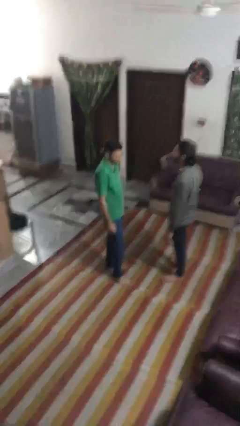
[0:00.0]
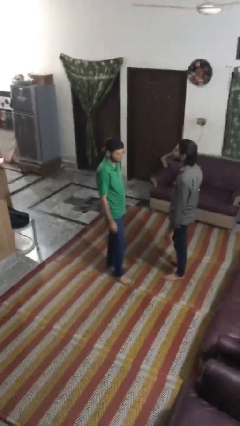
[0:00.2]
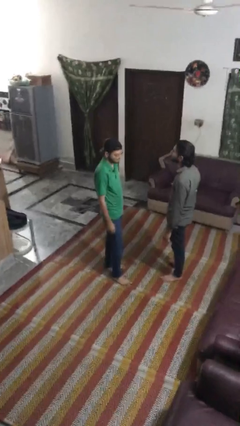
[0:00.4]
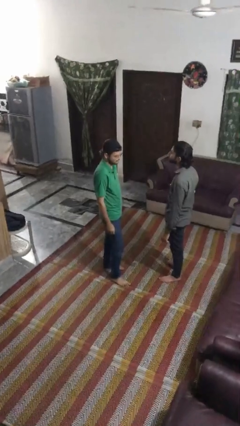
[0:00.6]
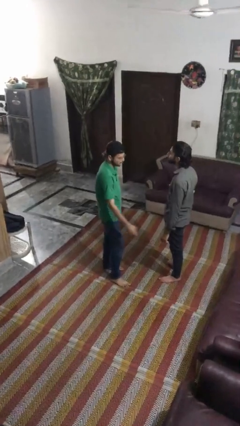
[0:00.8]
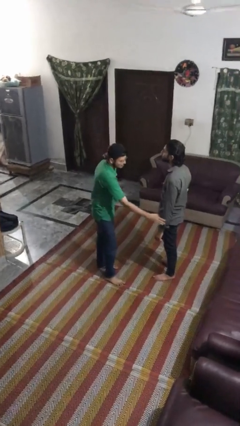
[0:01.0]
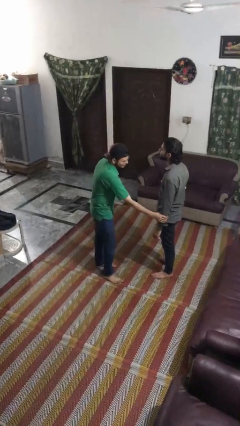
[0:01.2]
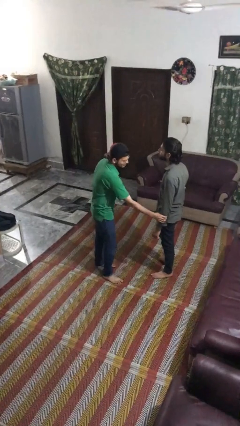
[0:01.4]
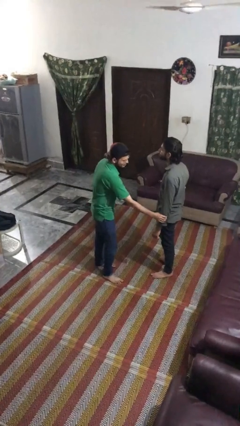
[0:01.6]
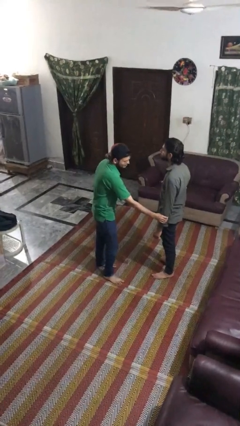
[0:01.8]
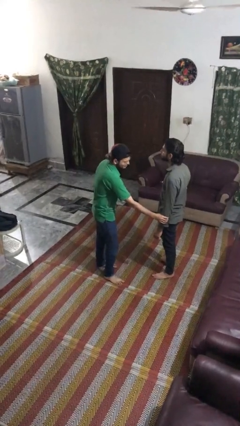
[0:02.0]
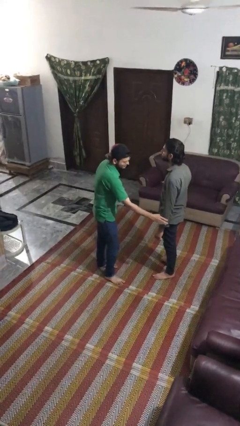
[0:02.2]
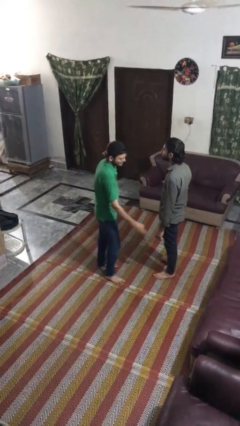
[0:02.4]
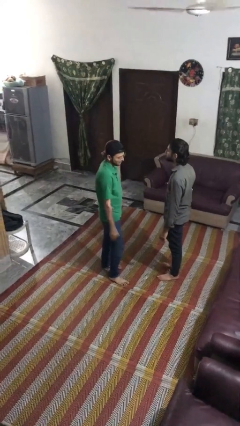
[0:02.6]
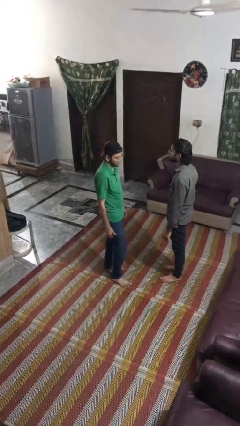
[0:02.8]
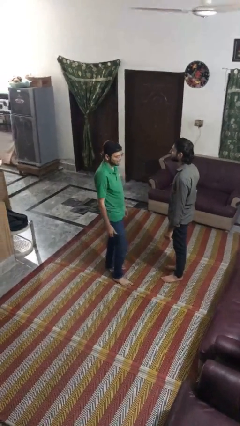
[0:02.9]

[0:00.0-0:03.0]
person grabs person by forearm

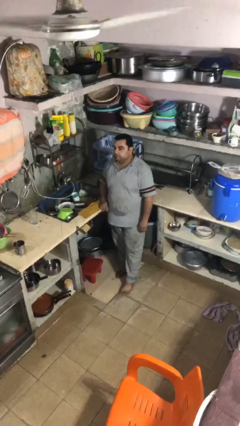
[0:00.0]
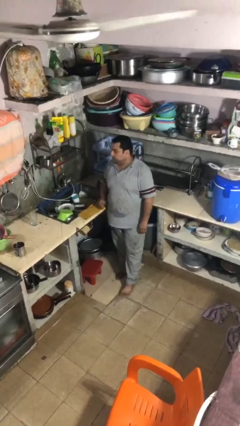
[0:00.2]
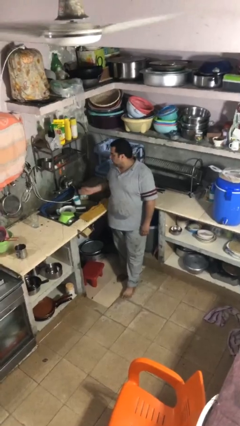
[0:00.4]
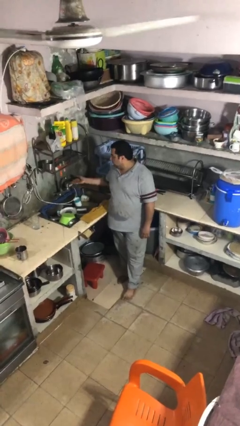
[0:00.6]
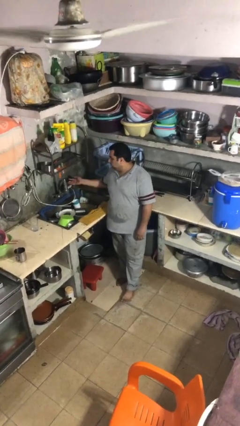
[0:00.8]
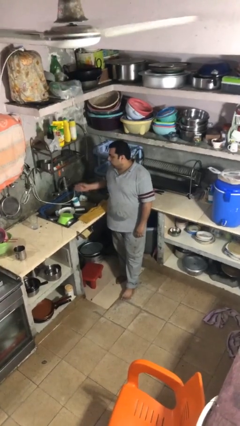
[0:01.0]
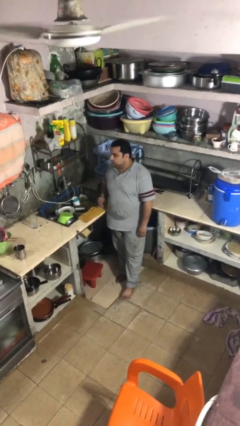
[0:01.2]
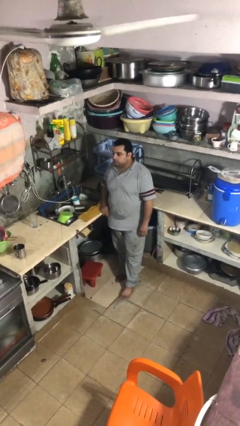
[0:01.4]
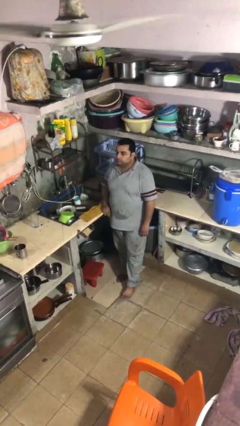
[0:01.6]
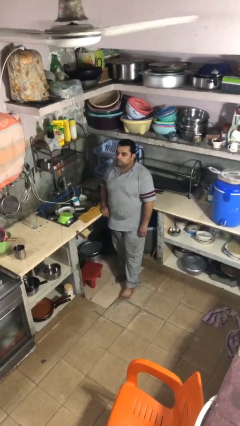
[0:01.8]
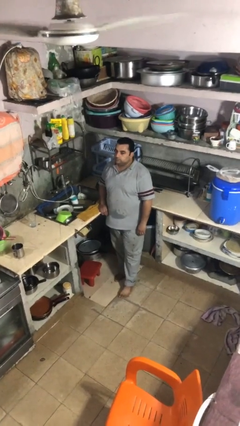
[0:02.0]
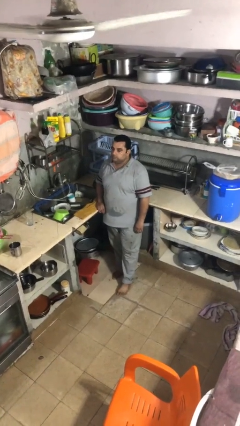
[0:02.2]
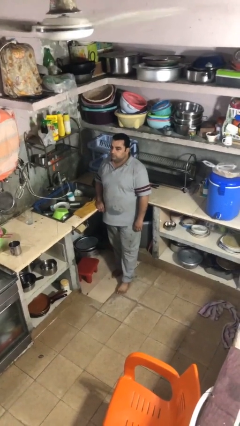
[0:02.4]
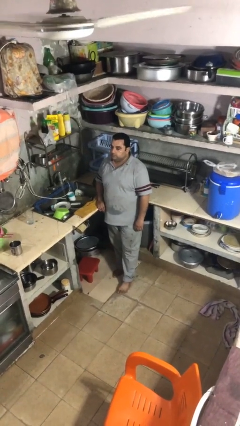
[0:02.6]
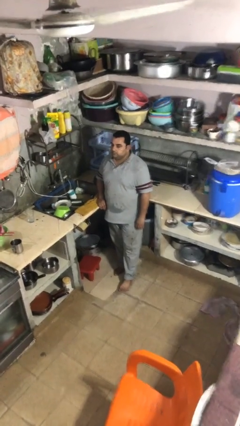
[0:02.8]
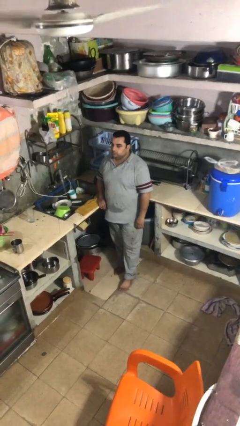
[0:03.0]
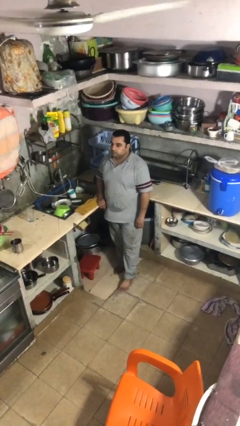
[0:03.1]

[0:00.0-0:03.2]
person turns on faucet

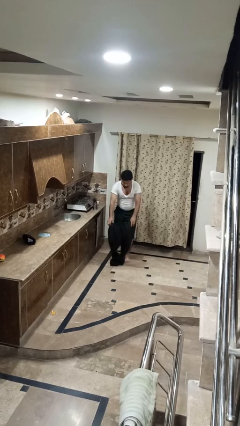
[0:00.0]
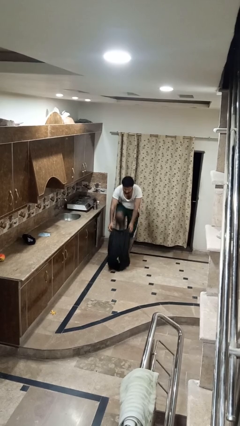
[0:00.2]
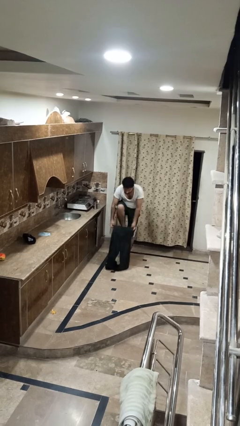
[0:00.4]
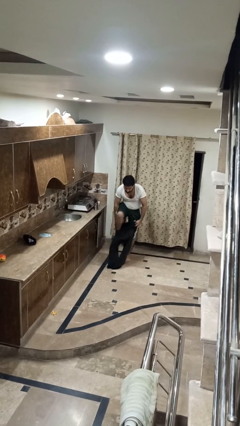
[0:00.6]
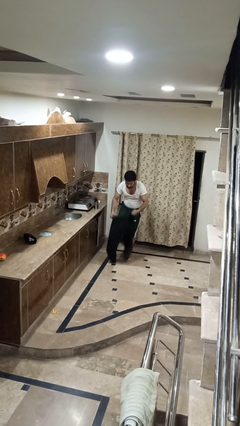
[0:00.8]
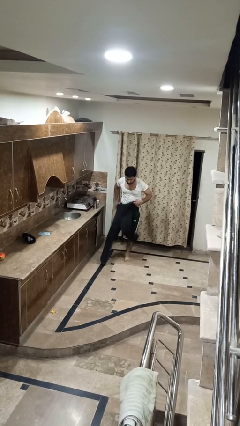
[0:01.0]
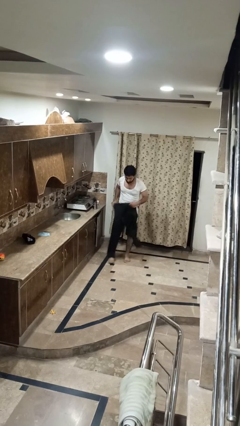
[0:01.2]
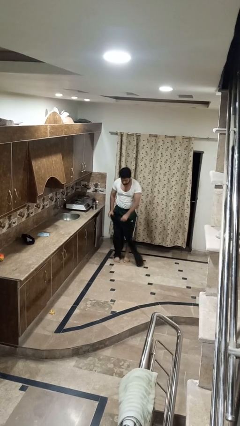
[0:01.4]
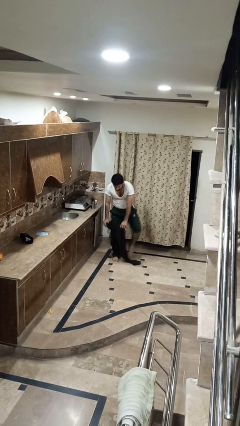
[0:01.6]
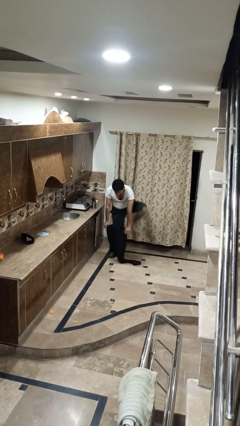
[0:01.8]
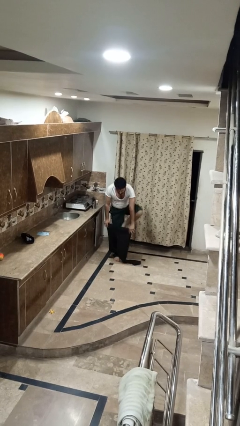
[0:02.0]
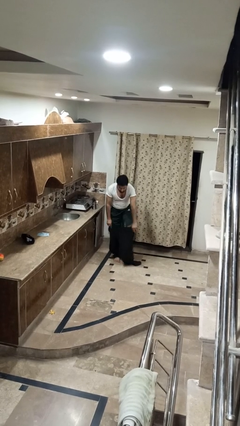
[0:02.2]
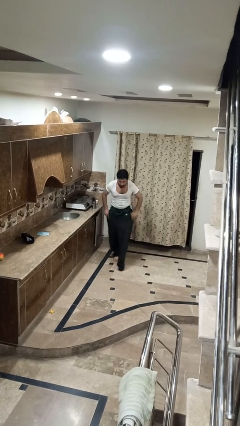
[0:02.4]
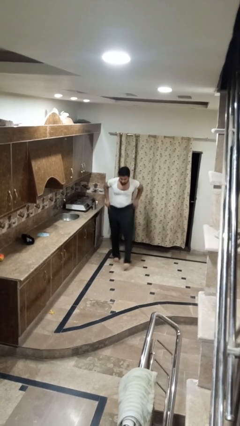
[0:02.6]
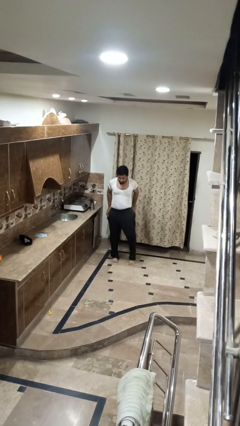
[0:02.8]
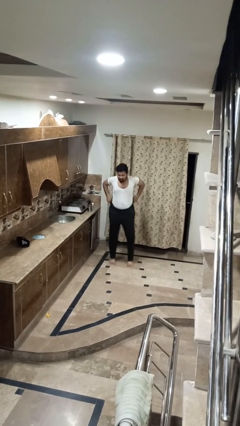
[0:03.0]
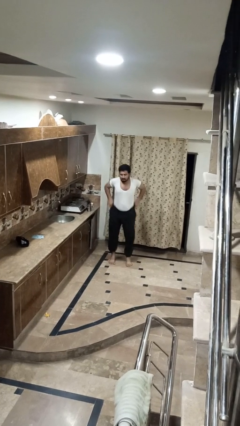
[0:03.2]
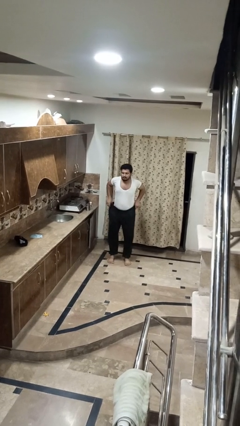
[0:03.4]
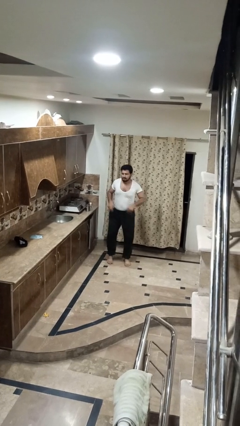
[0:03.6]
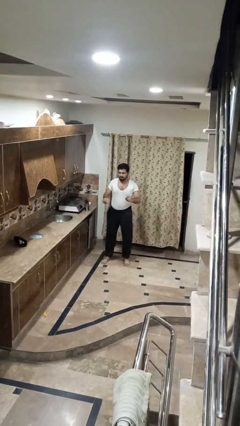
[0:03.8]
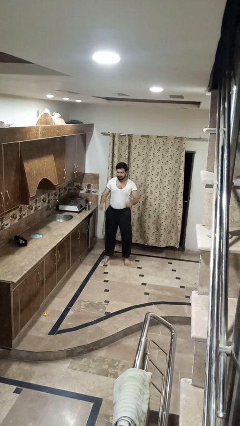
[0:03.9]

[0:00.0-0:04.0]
person puts on pants

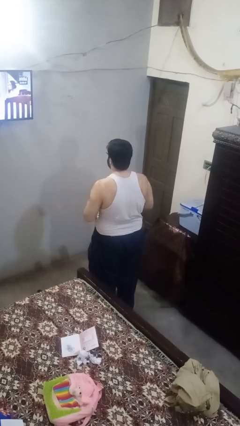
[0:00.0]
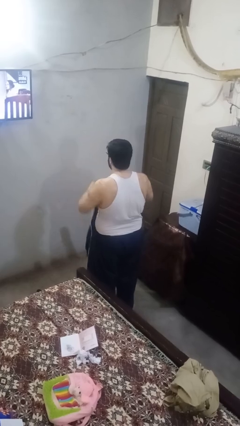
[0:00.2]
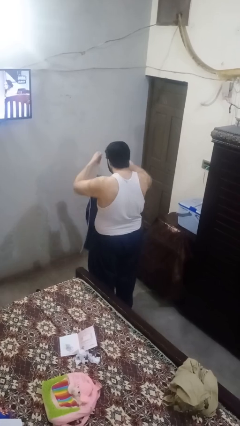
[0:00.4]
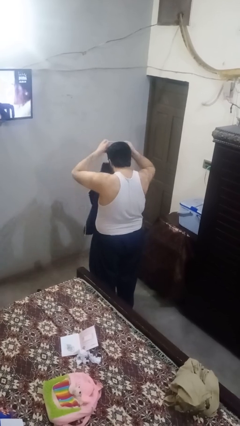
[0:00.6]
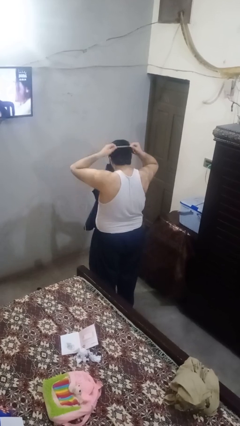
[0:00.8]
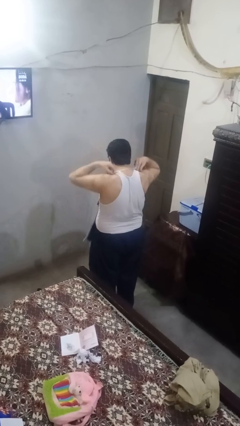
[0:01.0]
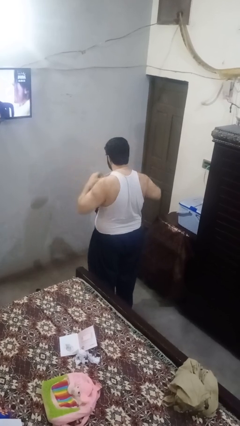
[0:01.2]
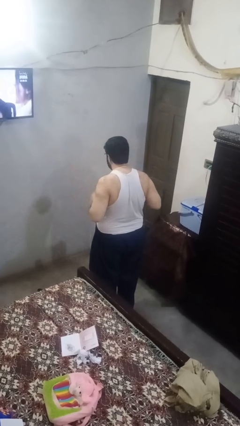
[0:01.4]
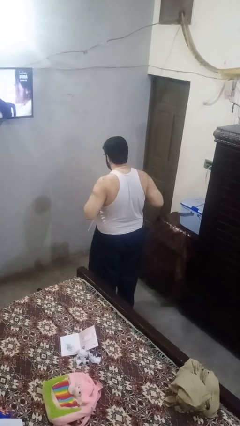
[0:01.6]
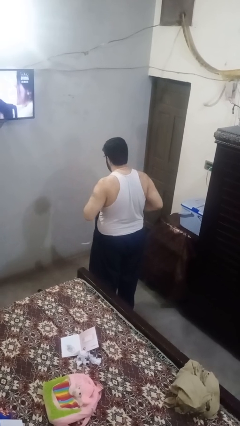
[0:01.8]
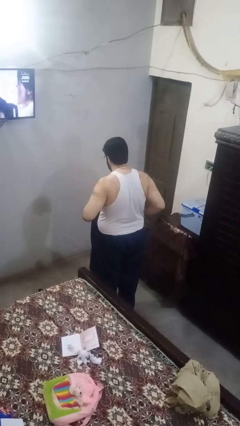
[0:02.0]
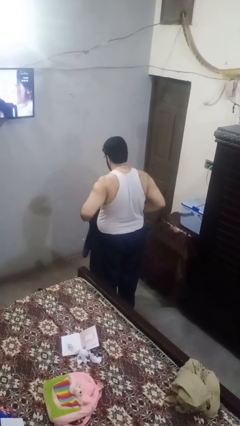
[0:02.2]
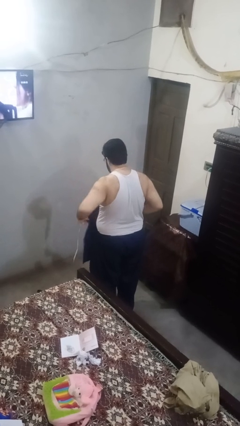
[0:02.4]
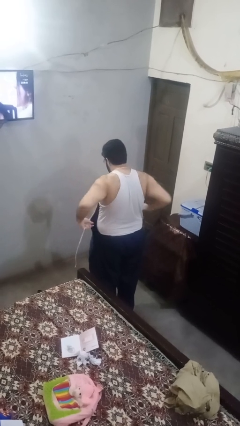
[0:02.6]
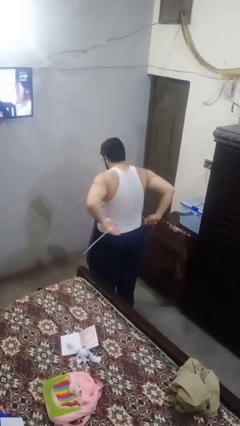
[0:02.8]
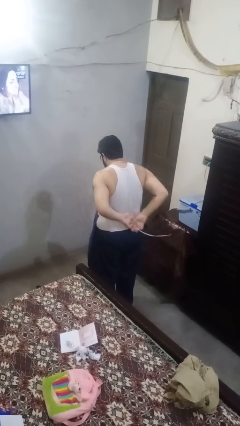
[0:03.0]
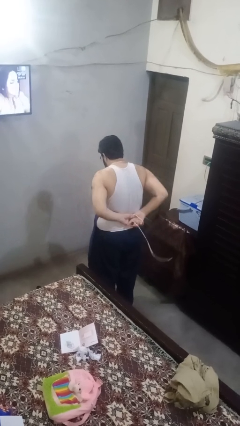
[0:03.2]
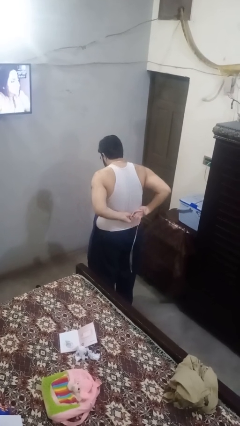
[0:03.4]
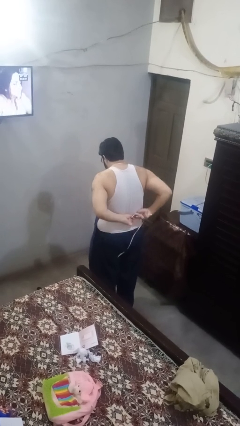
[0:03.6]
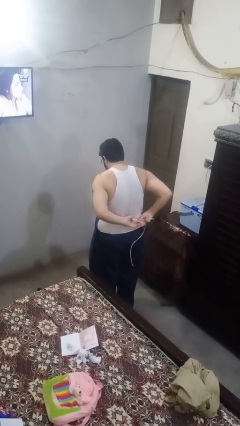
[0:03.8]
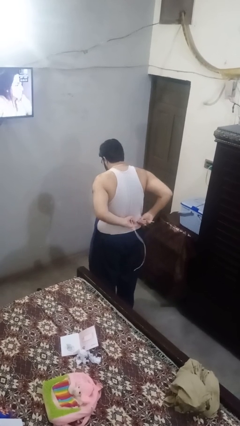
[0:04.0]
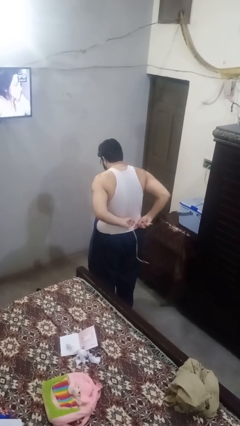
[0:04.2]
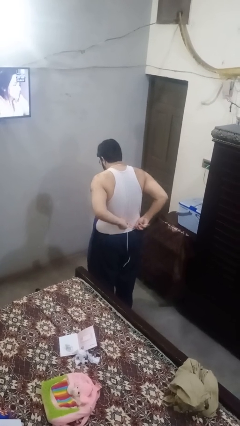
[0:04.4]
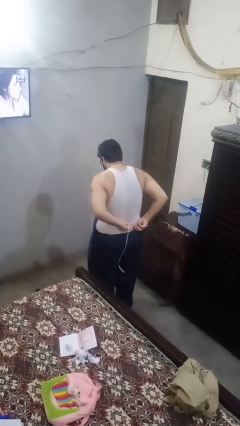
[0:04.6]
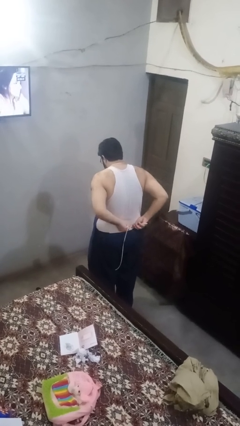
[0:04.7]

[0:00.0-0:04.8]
person puts on apron

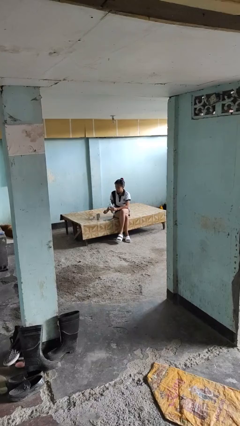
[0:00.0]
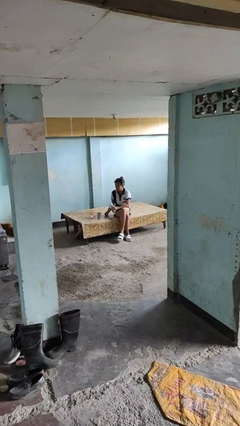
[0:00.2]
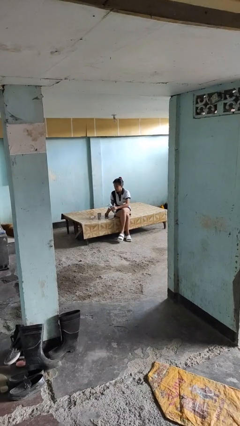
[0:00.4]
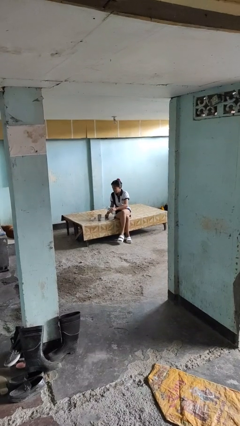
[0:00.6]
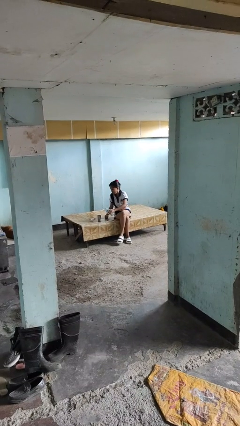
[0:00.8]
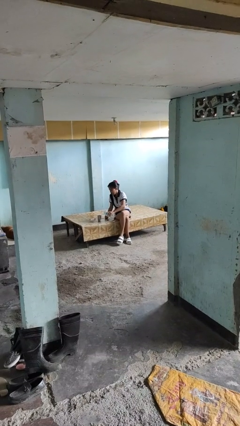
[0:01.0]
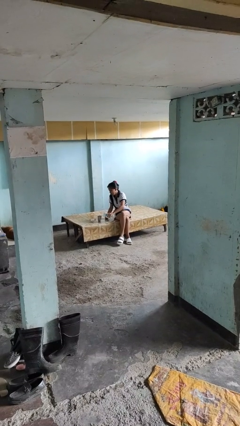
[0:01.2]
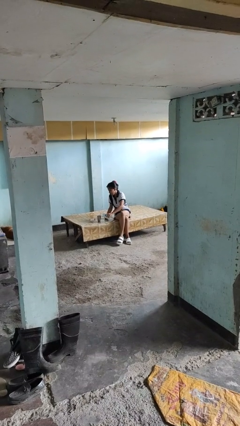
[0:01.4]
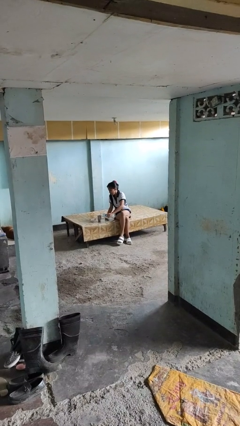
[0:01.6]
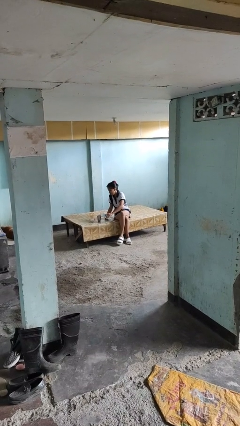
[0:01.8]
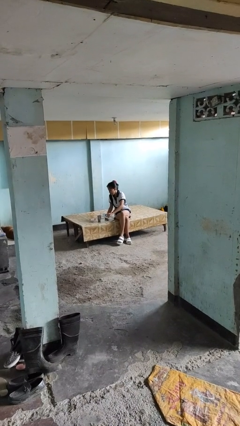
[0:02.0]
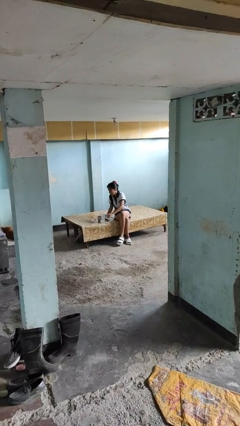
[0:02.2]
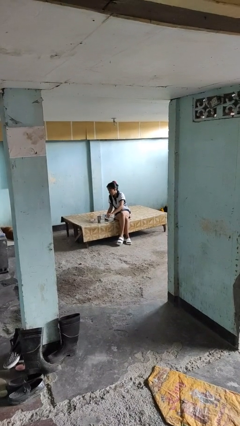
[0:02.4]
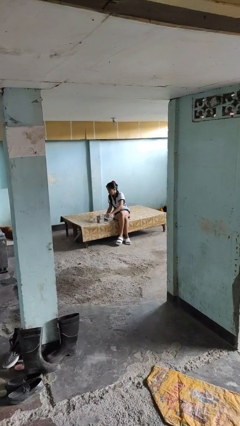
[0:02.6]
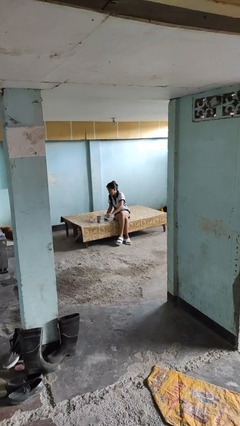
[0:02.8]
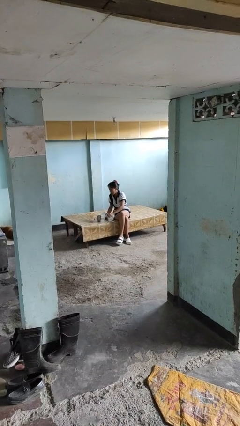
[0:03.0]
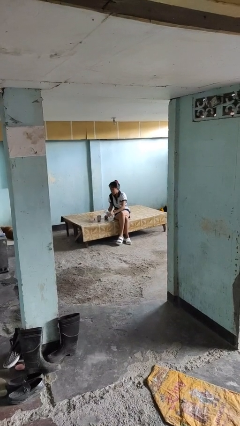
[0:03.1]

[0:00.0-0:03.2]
person pours liquid into cup
